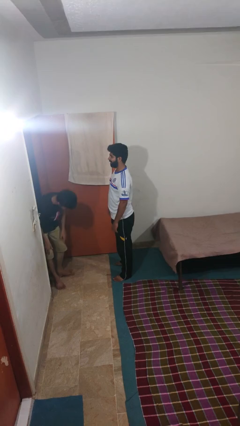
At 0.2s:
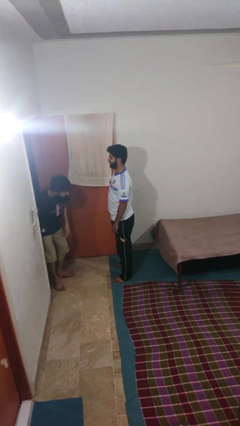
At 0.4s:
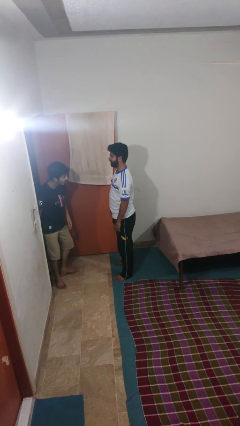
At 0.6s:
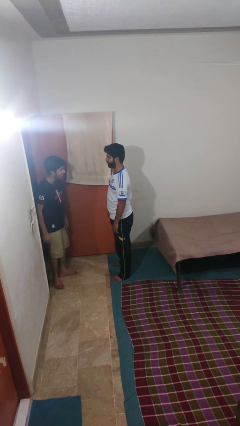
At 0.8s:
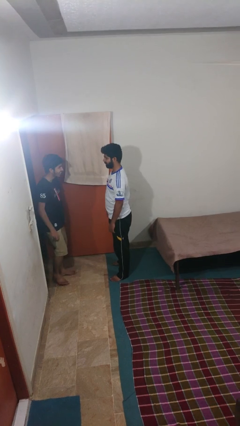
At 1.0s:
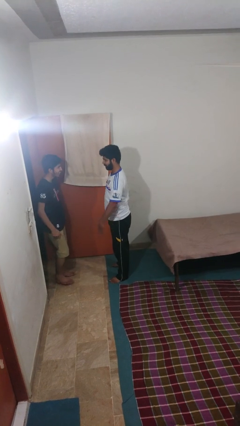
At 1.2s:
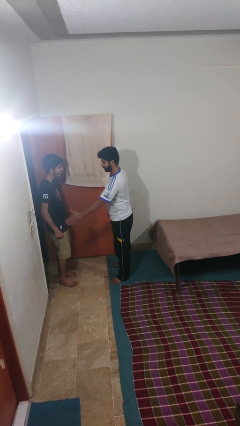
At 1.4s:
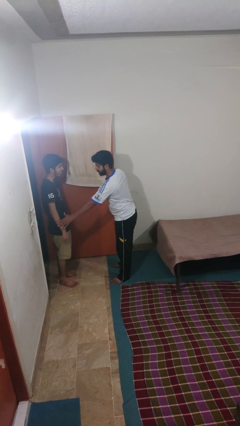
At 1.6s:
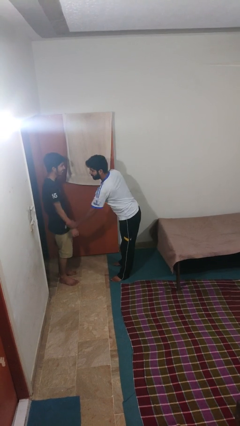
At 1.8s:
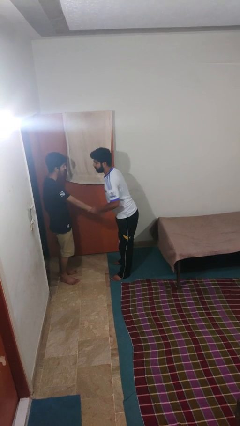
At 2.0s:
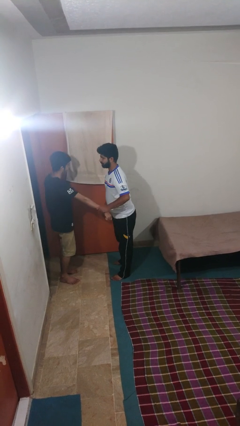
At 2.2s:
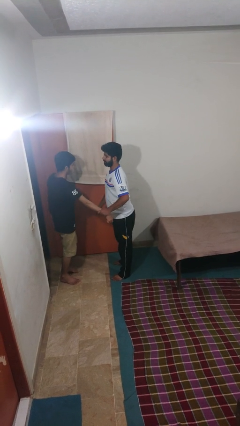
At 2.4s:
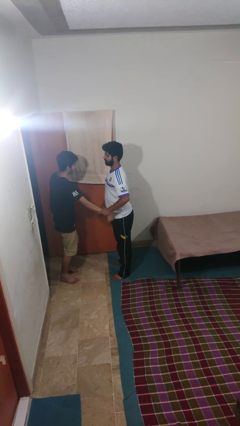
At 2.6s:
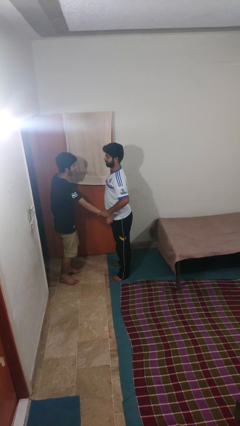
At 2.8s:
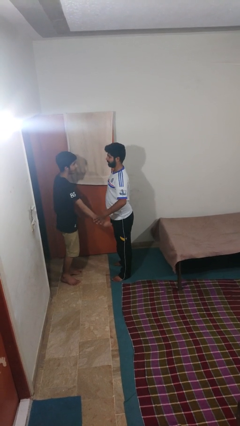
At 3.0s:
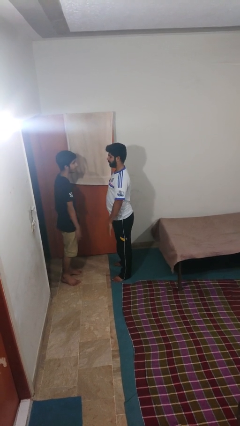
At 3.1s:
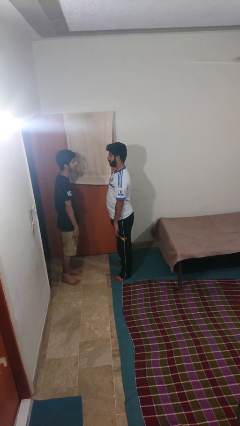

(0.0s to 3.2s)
person grabs person by forearm

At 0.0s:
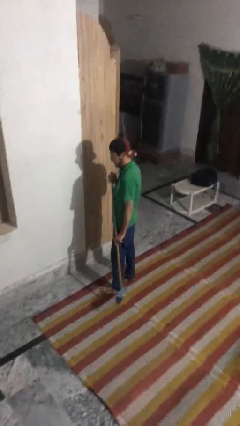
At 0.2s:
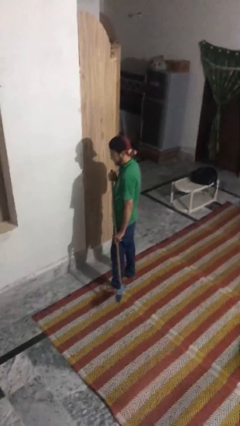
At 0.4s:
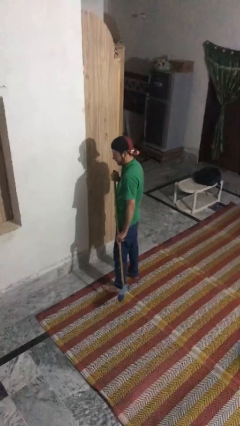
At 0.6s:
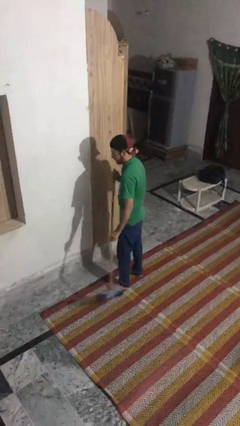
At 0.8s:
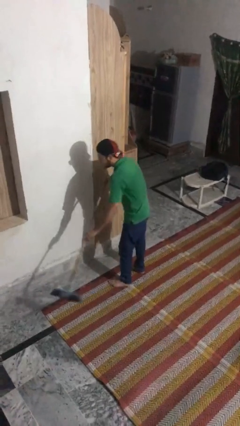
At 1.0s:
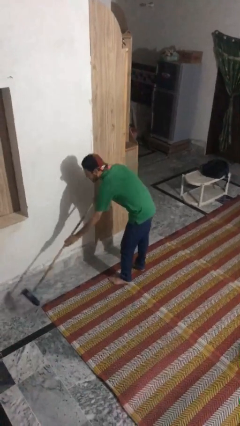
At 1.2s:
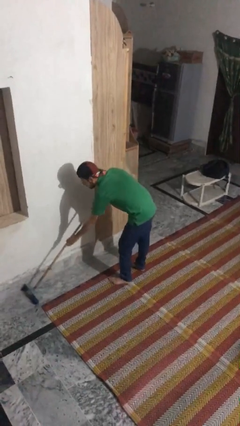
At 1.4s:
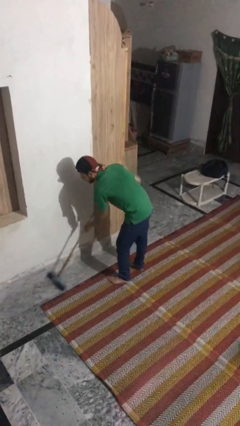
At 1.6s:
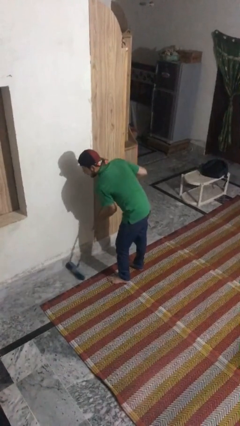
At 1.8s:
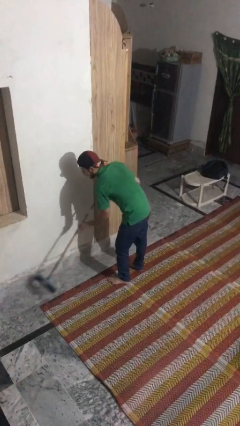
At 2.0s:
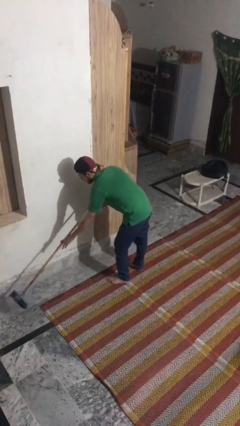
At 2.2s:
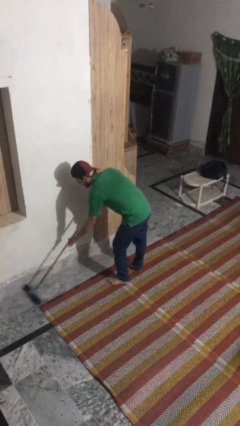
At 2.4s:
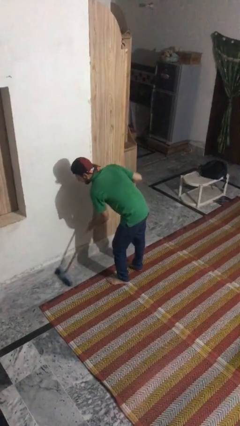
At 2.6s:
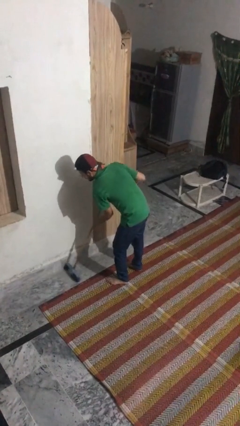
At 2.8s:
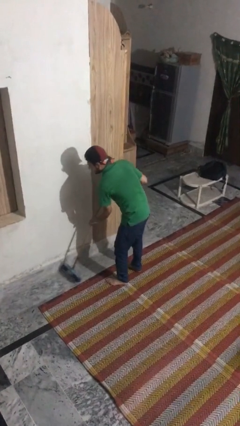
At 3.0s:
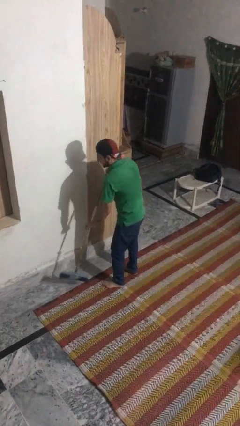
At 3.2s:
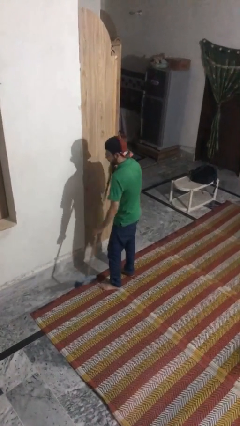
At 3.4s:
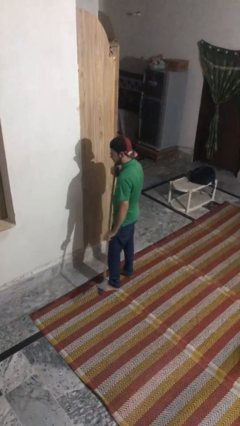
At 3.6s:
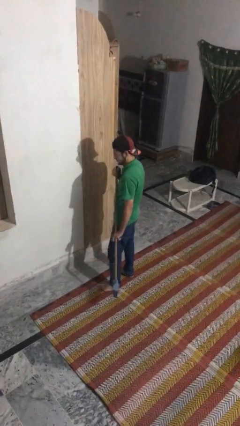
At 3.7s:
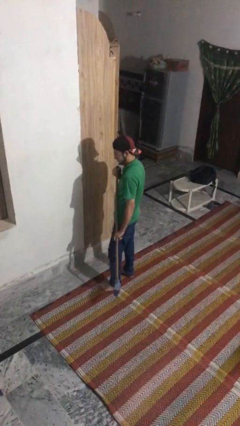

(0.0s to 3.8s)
person sweeps floor

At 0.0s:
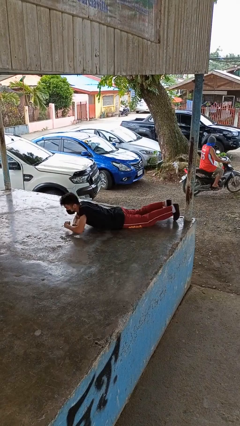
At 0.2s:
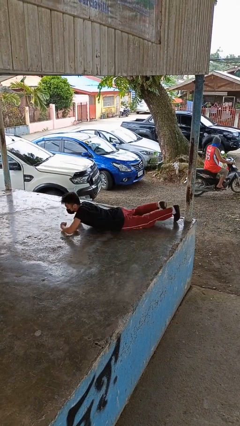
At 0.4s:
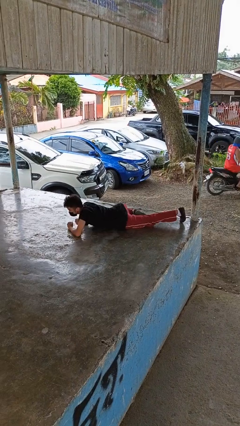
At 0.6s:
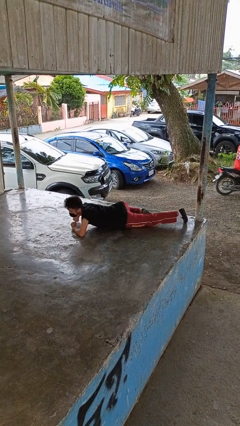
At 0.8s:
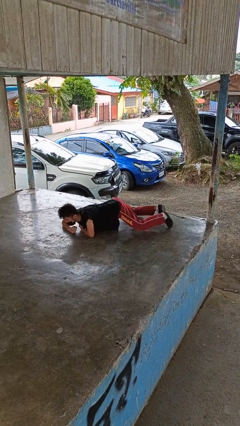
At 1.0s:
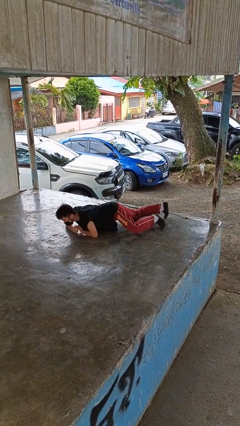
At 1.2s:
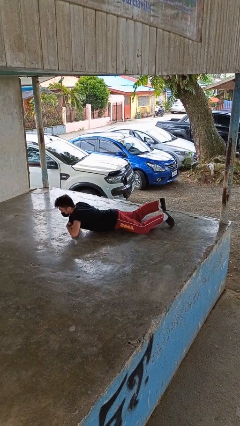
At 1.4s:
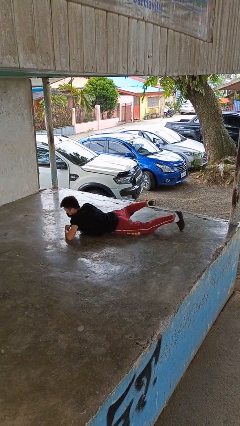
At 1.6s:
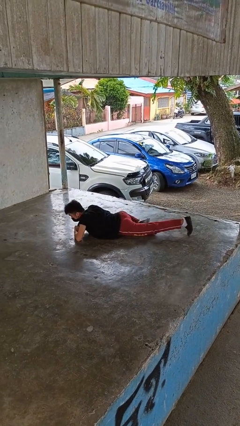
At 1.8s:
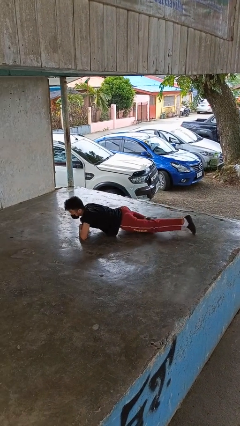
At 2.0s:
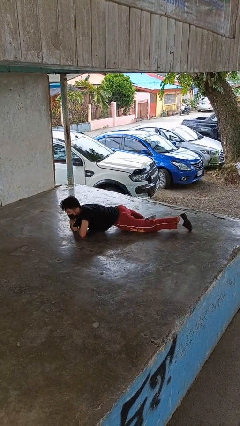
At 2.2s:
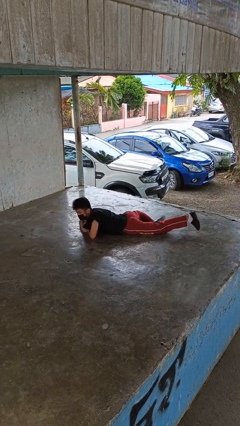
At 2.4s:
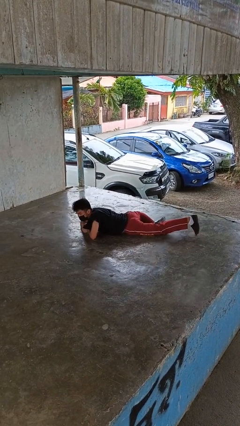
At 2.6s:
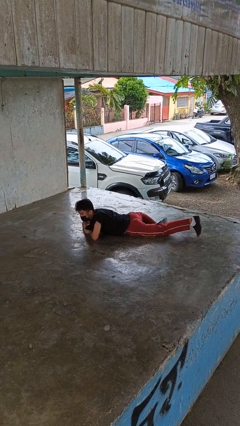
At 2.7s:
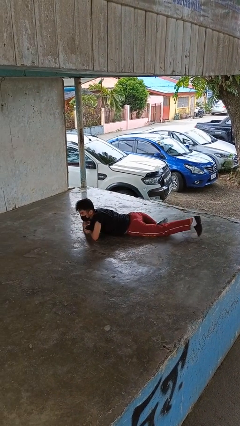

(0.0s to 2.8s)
person crawls

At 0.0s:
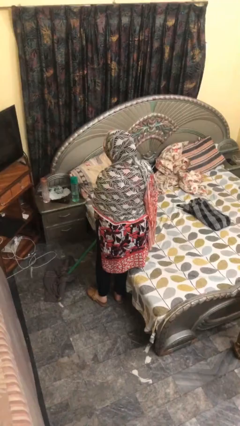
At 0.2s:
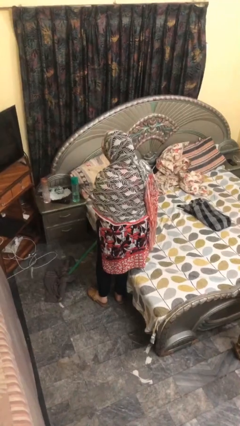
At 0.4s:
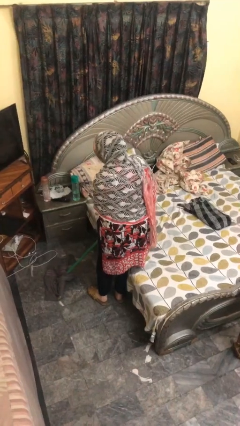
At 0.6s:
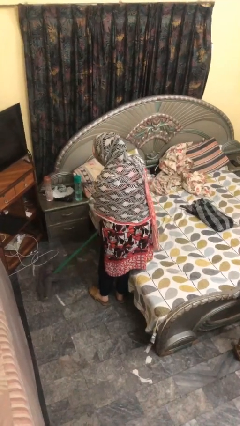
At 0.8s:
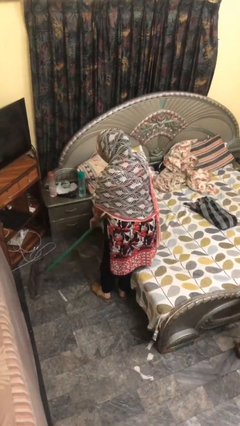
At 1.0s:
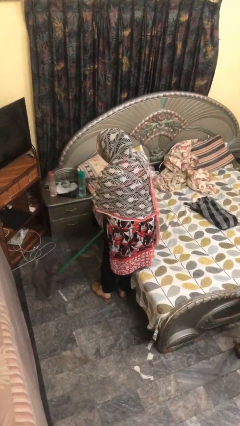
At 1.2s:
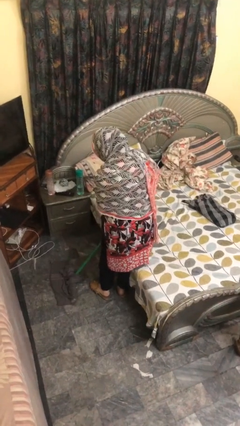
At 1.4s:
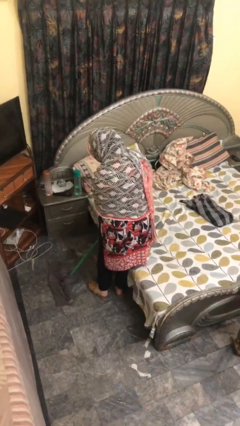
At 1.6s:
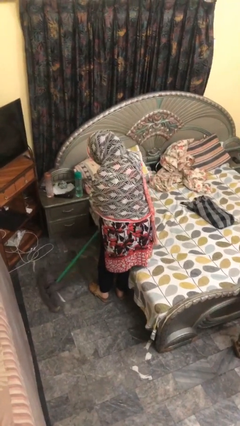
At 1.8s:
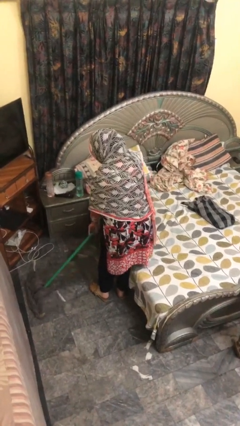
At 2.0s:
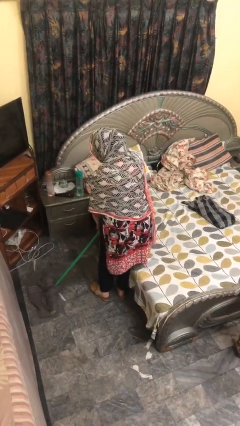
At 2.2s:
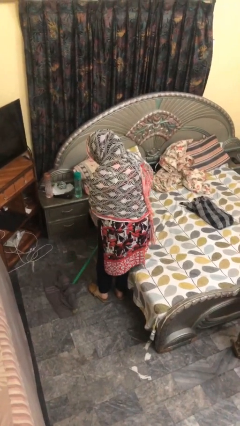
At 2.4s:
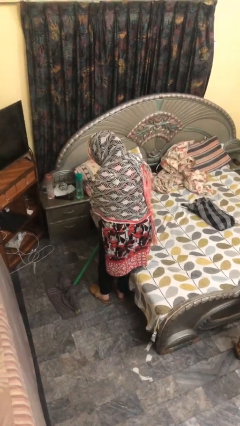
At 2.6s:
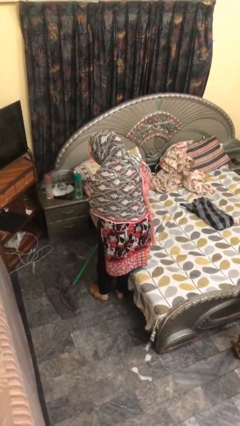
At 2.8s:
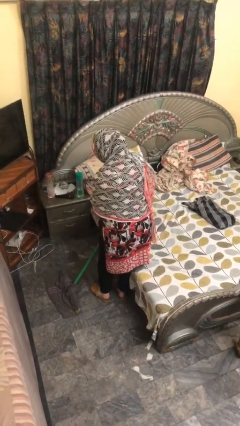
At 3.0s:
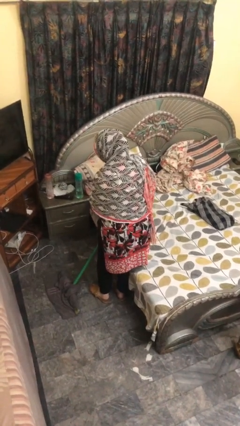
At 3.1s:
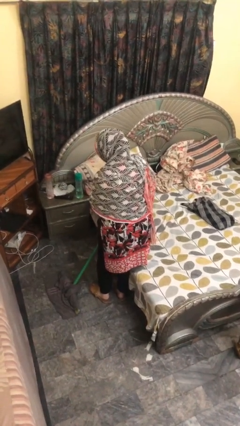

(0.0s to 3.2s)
person mops

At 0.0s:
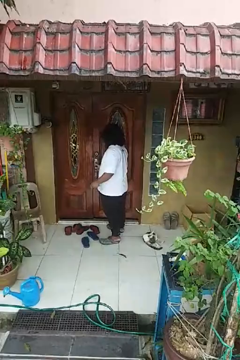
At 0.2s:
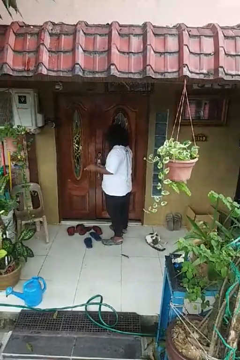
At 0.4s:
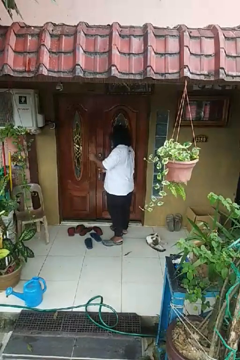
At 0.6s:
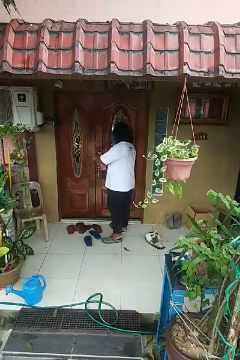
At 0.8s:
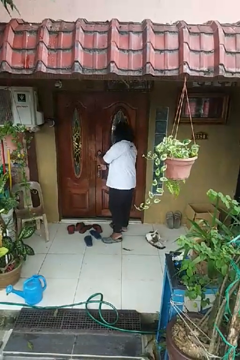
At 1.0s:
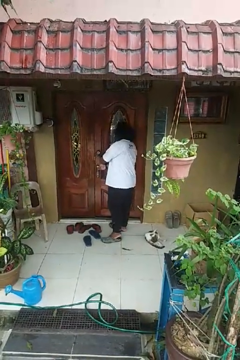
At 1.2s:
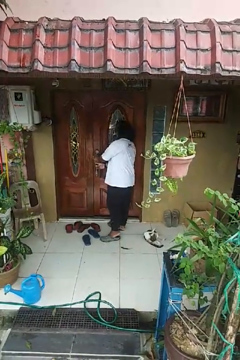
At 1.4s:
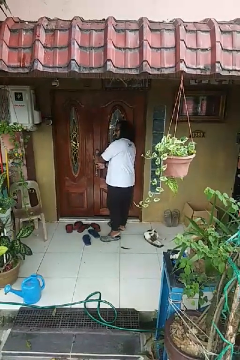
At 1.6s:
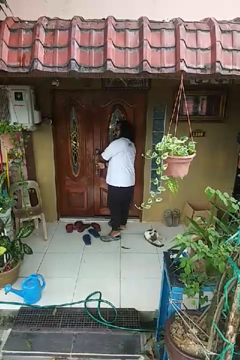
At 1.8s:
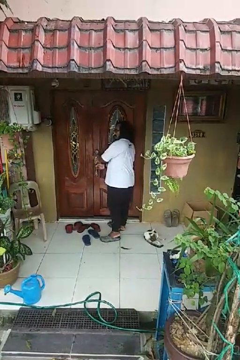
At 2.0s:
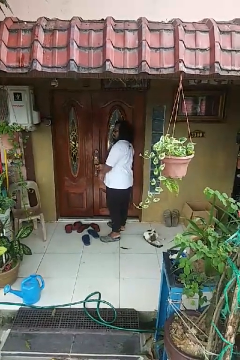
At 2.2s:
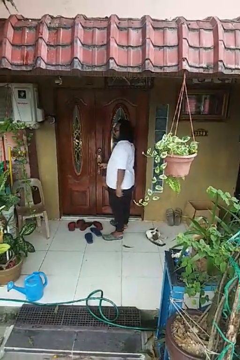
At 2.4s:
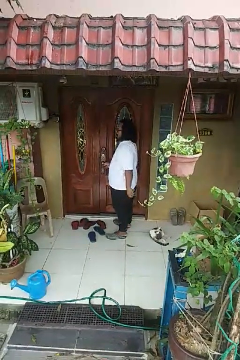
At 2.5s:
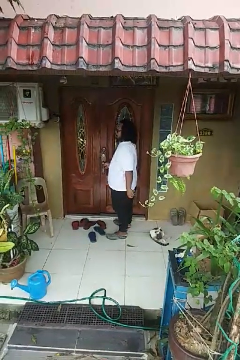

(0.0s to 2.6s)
person locks door with keys

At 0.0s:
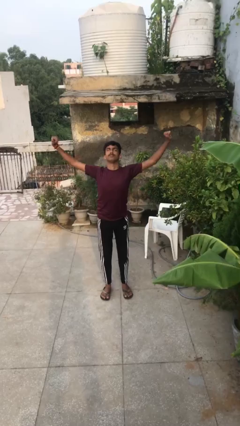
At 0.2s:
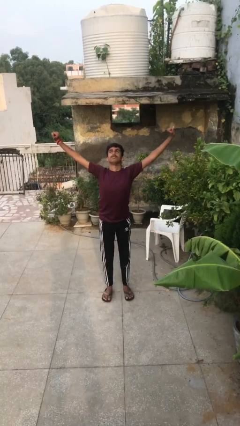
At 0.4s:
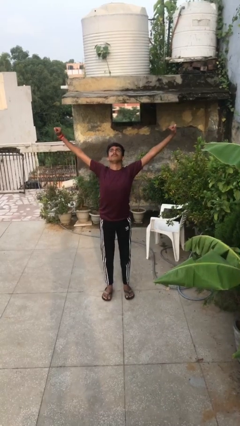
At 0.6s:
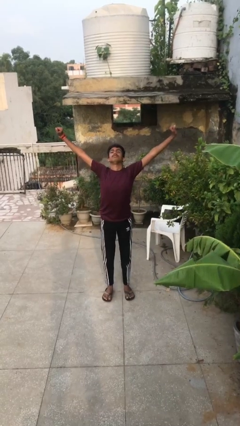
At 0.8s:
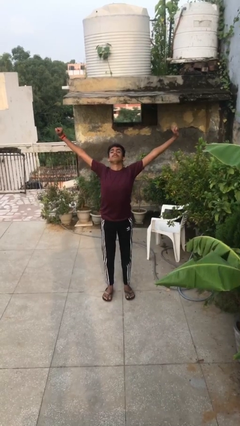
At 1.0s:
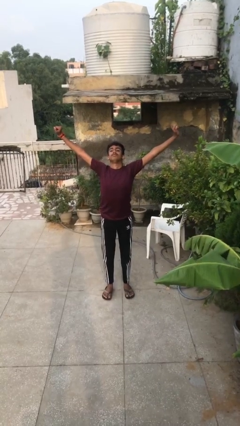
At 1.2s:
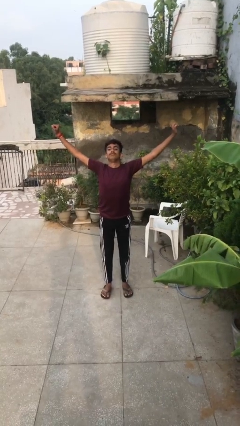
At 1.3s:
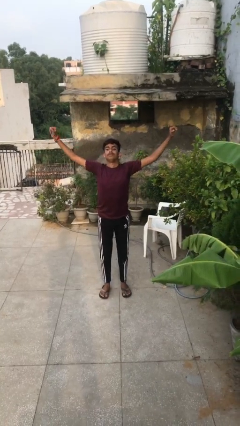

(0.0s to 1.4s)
person stretches arms to side

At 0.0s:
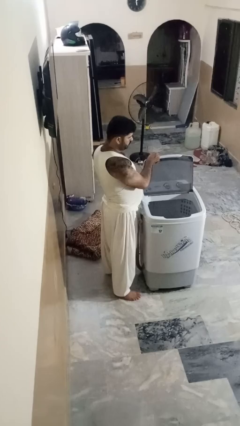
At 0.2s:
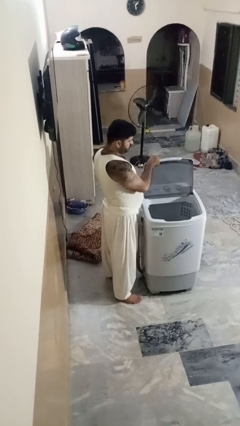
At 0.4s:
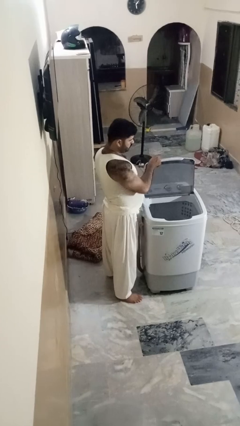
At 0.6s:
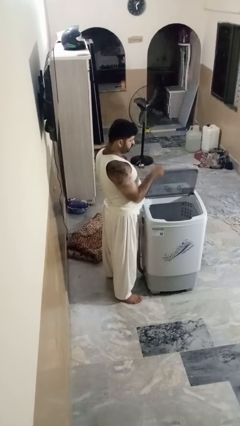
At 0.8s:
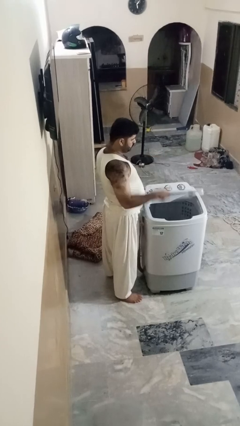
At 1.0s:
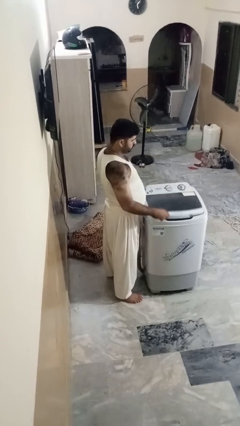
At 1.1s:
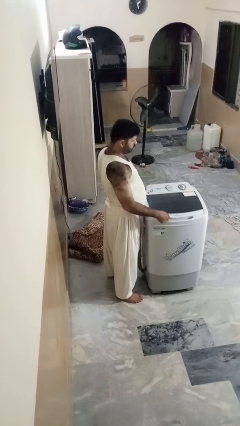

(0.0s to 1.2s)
person closes clothes washer
